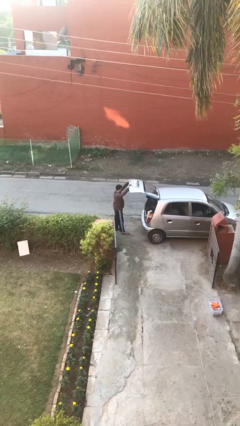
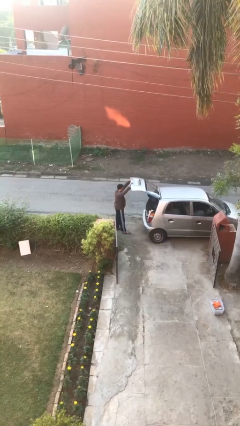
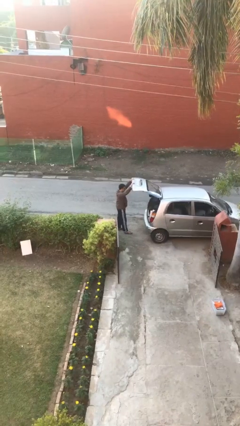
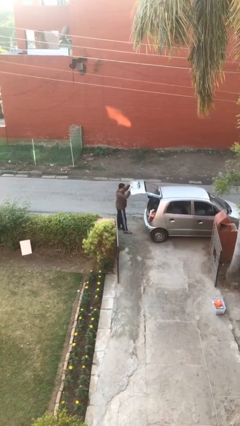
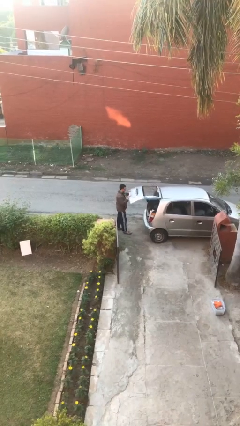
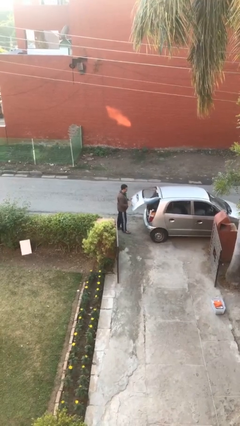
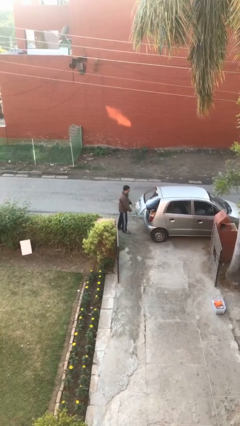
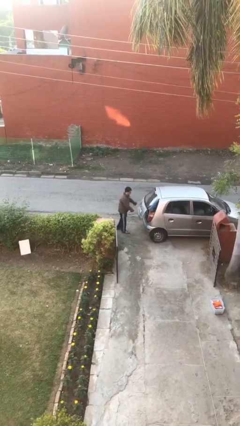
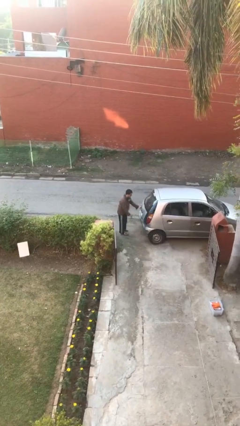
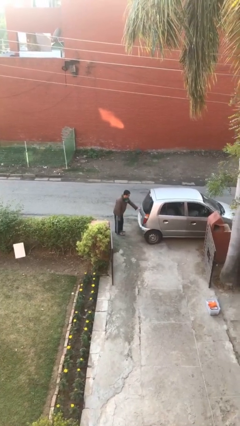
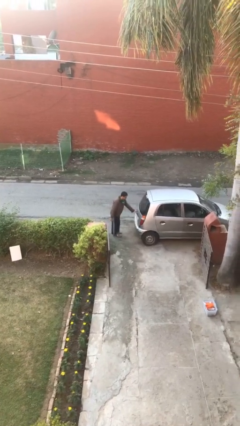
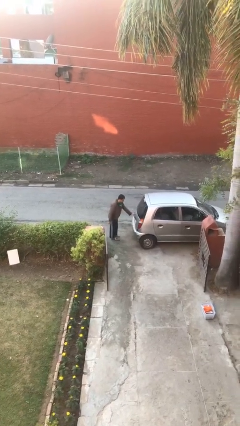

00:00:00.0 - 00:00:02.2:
person closes car trunk

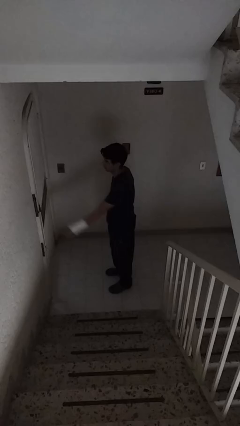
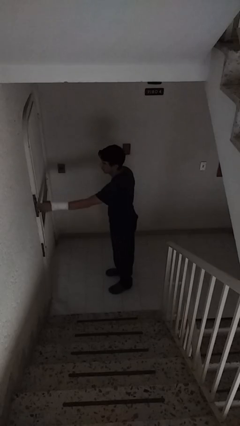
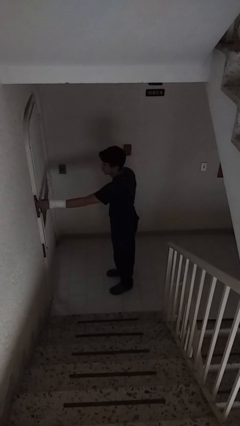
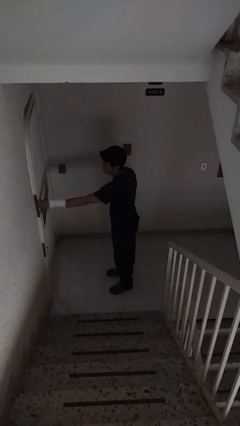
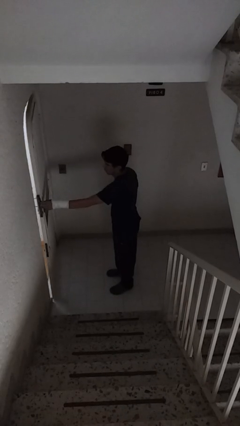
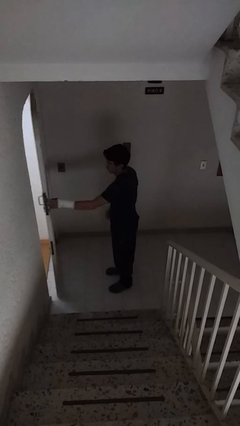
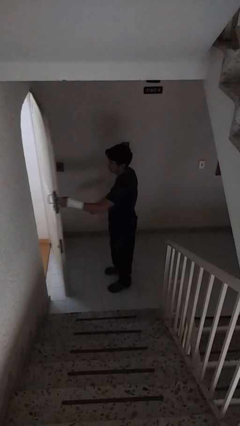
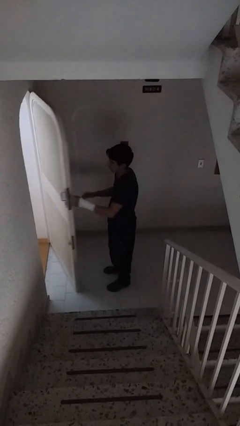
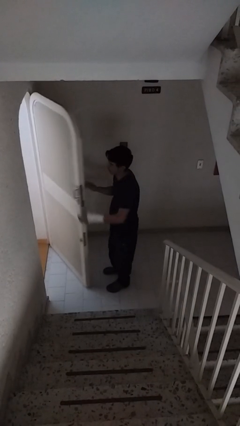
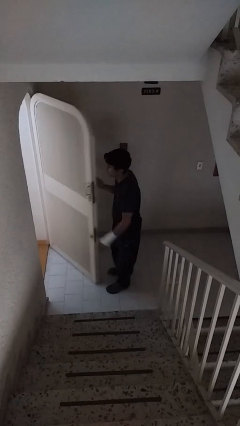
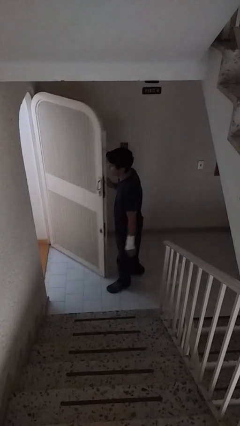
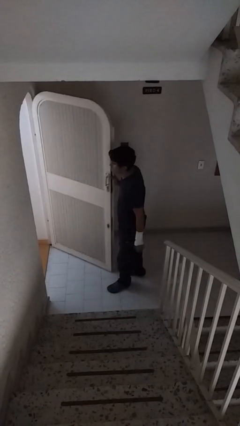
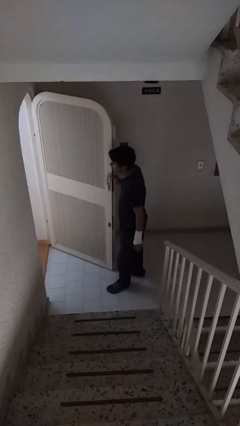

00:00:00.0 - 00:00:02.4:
person opens facility door

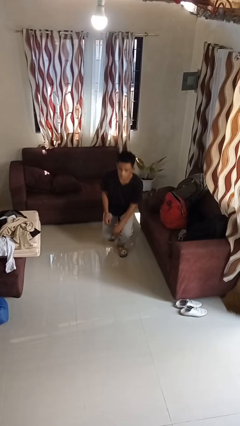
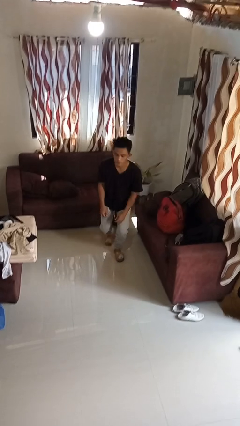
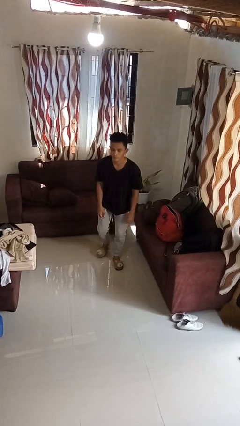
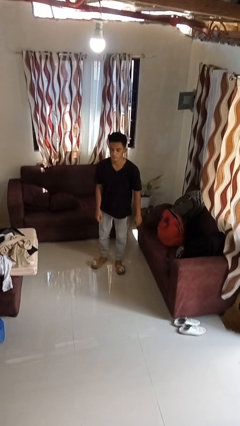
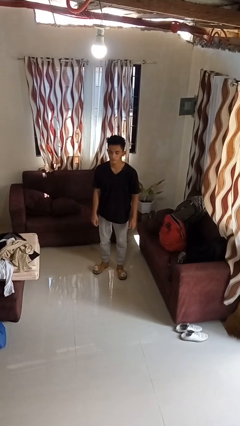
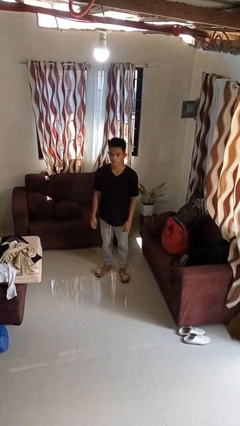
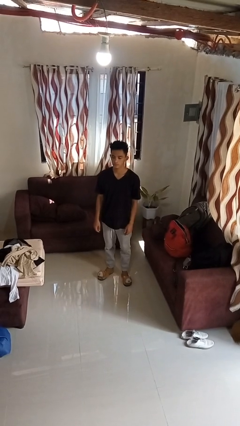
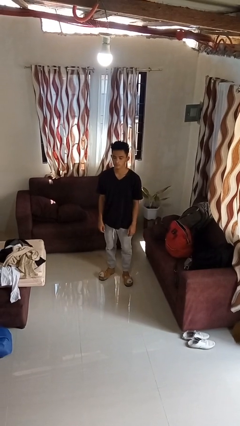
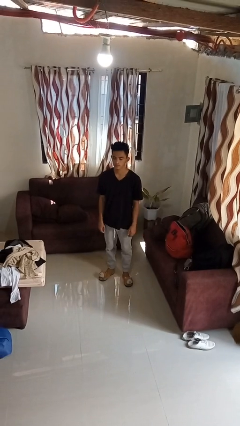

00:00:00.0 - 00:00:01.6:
person stands up from floor

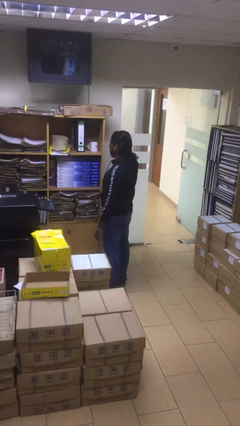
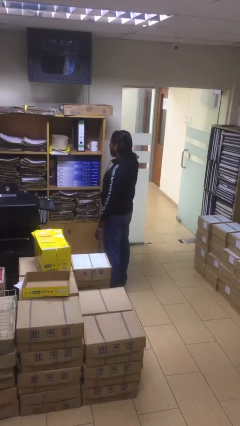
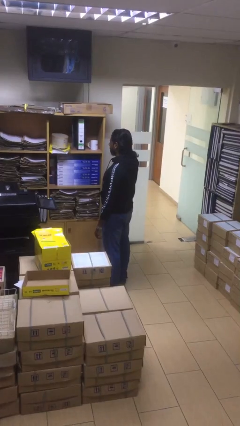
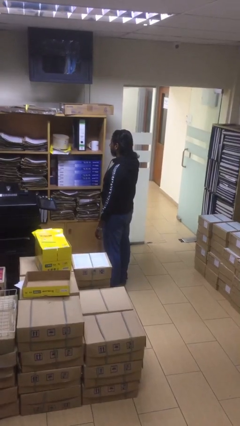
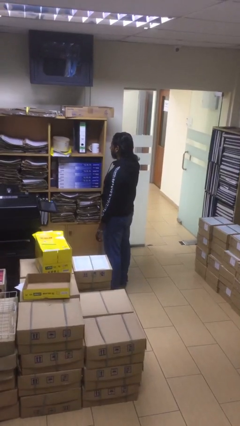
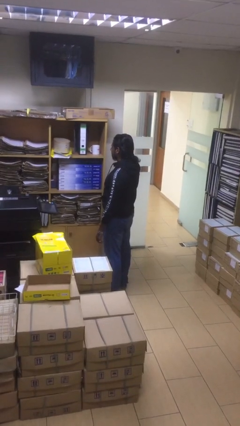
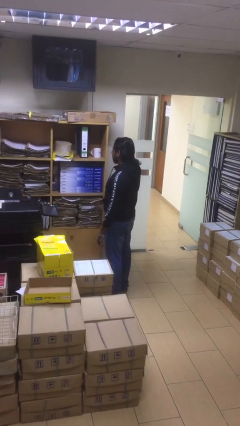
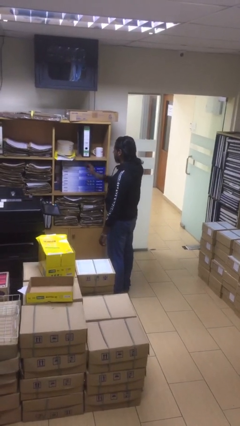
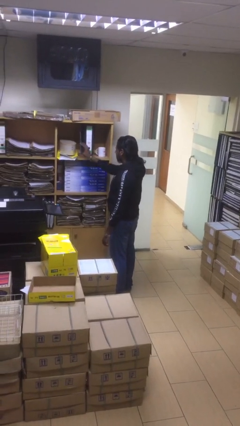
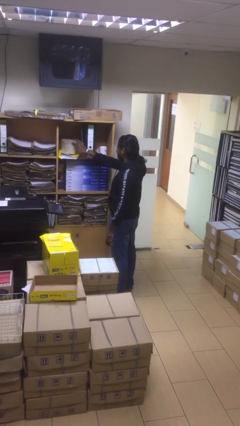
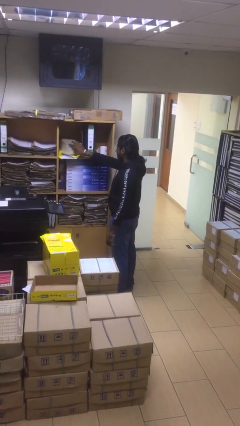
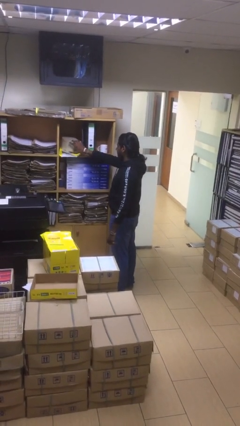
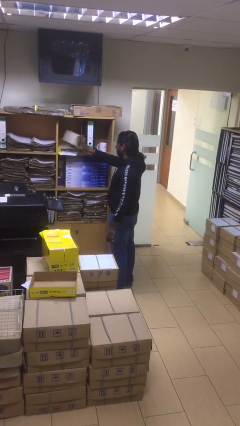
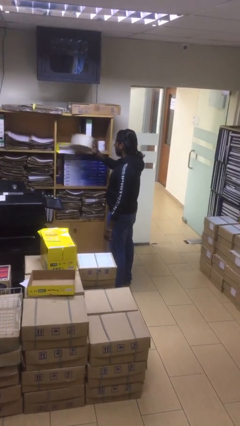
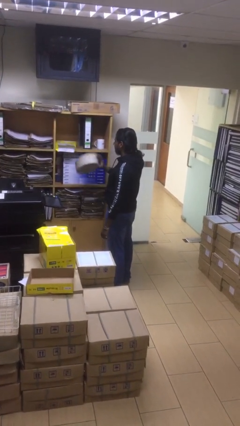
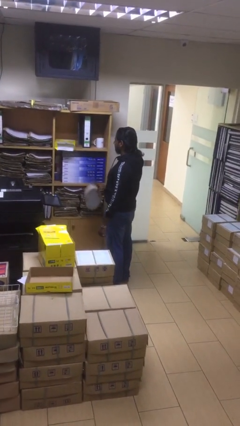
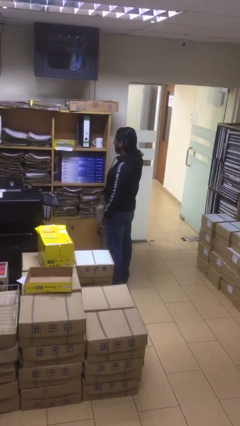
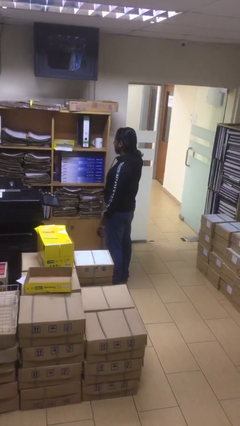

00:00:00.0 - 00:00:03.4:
person picks up object from cabinet

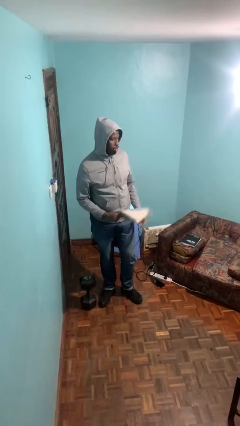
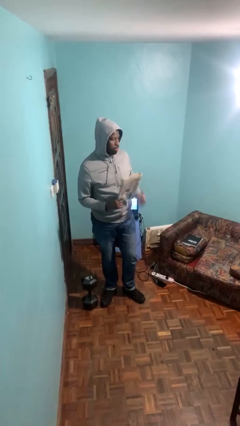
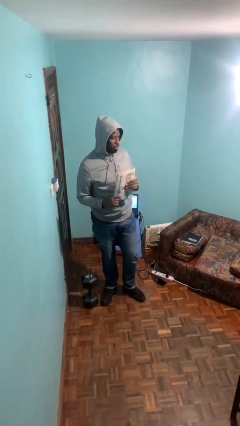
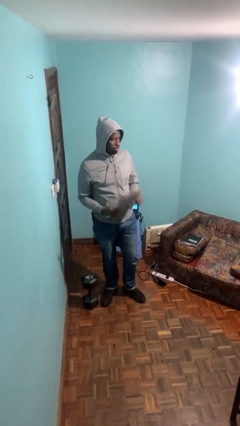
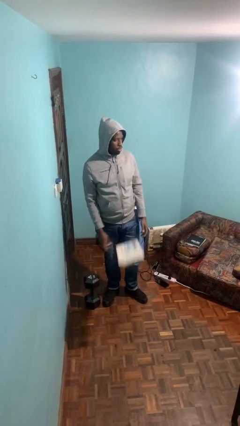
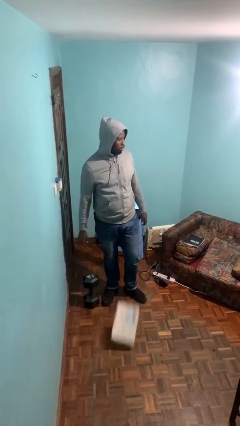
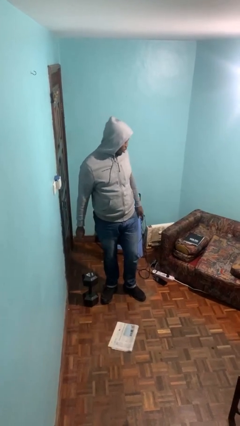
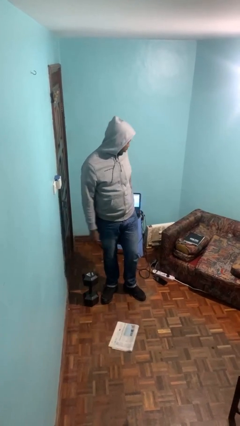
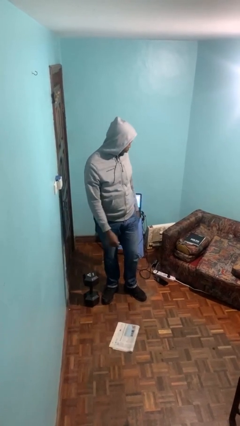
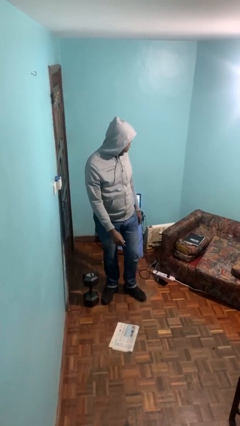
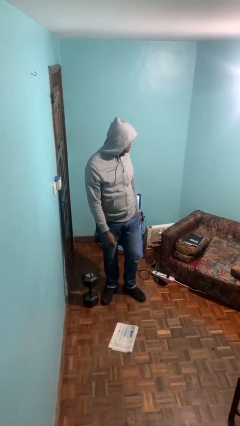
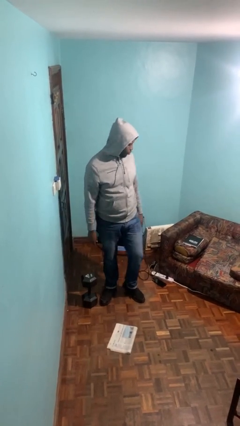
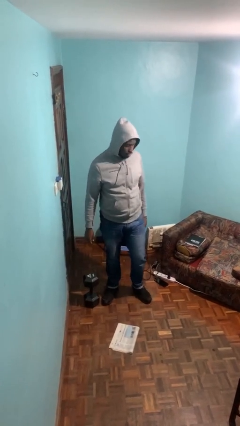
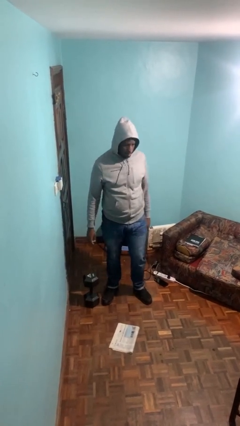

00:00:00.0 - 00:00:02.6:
person drops object

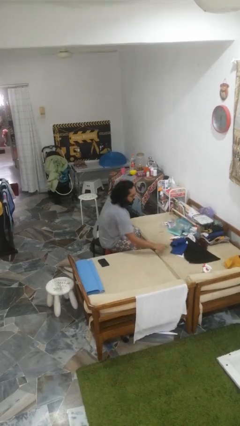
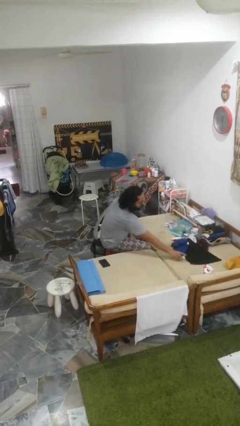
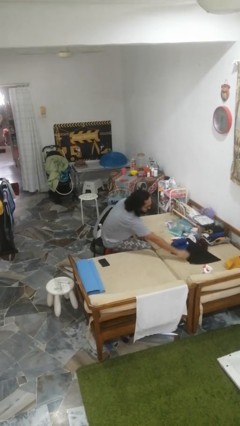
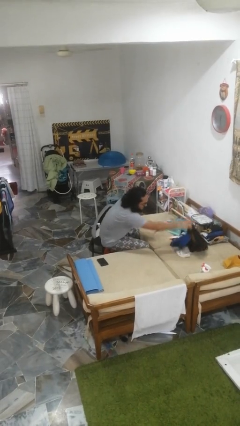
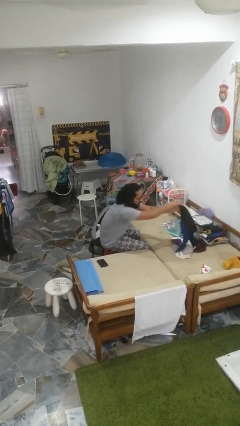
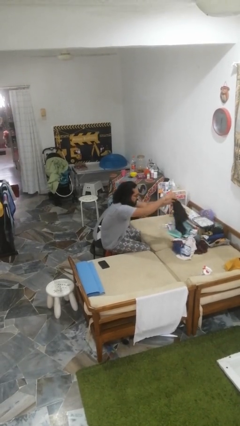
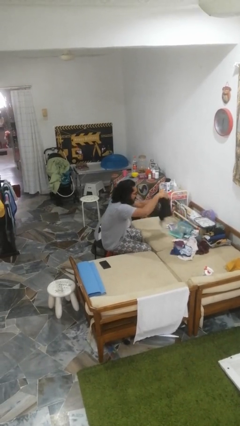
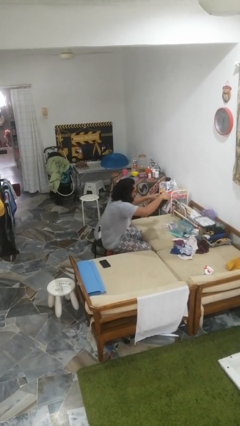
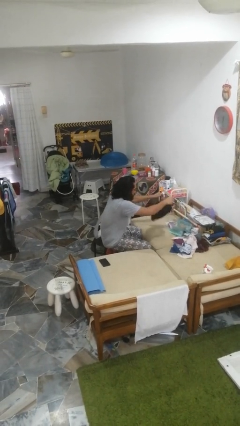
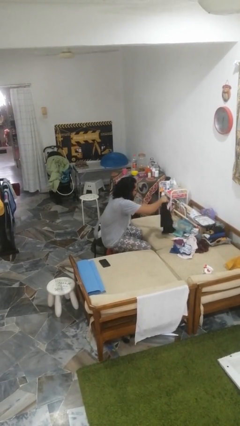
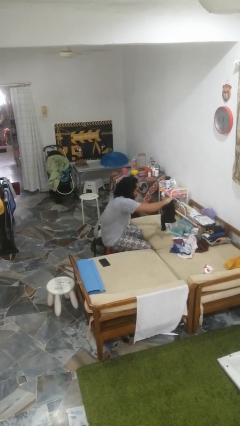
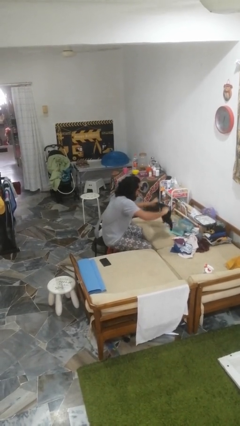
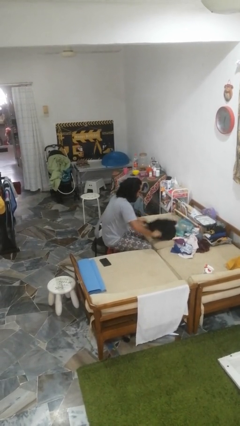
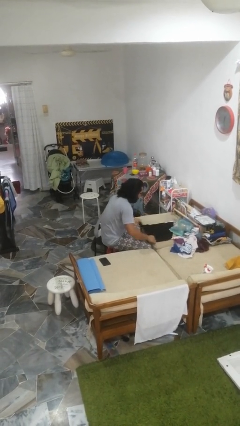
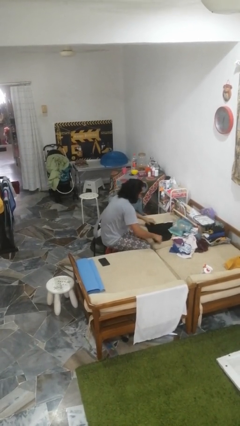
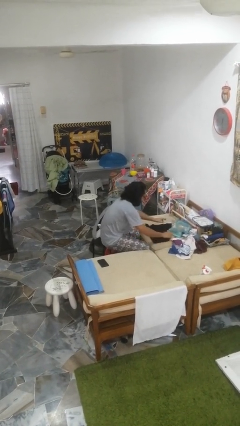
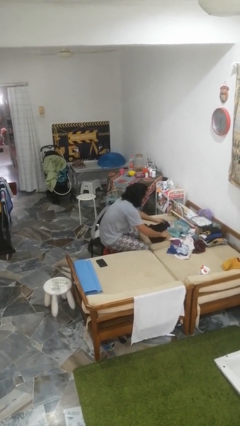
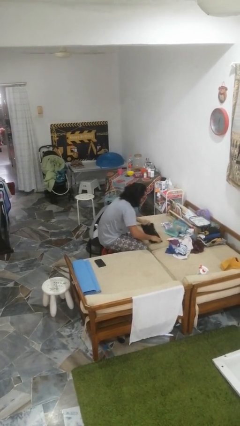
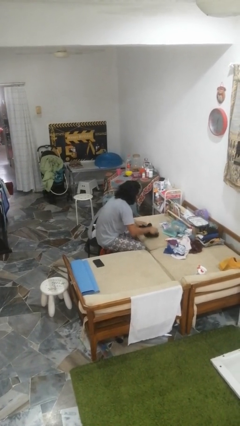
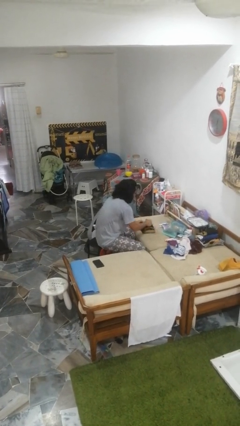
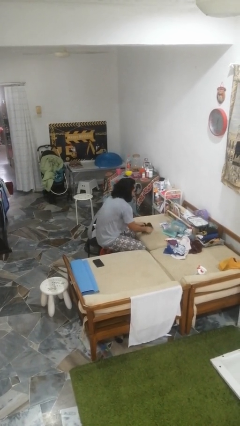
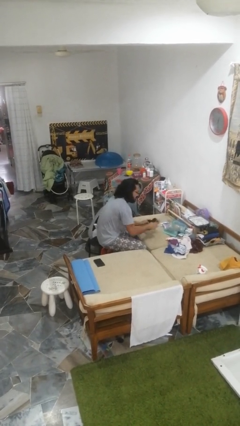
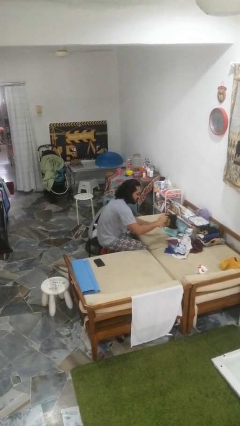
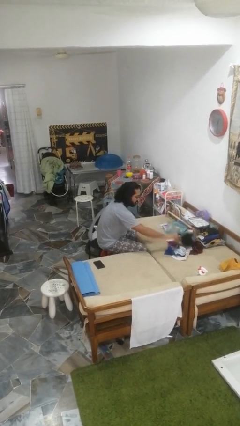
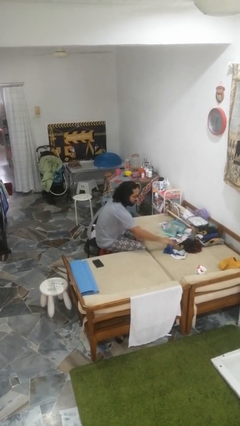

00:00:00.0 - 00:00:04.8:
person folds shirt

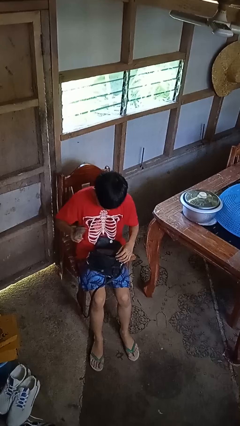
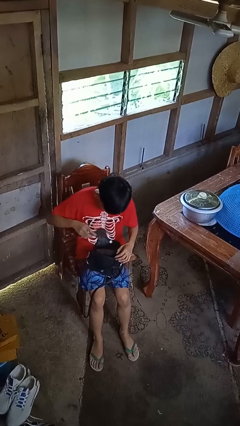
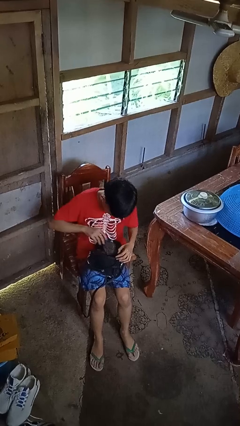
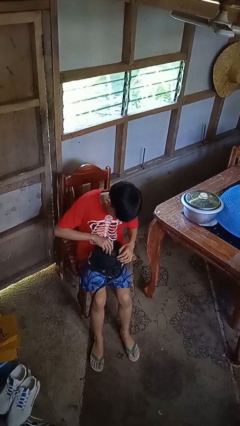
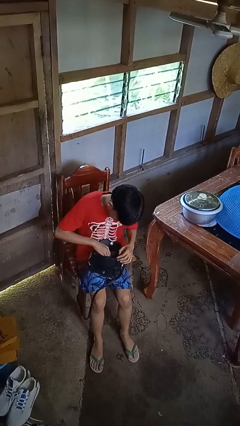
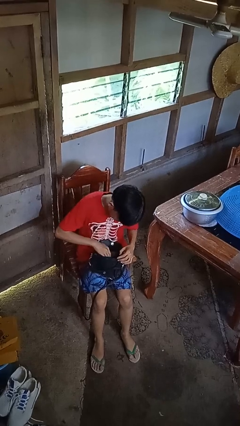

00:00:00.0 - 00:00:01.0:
person puts object into purse
